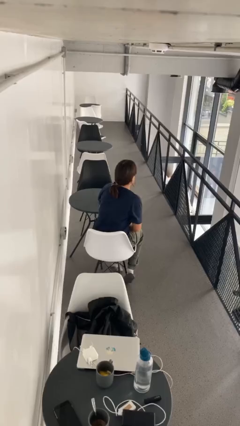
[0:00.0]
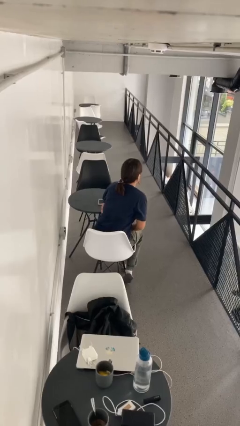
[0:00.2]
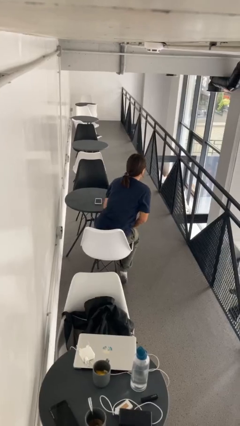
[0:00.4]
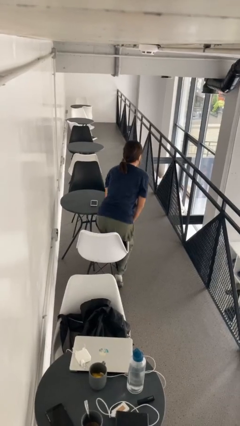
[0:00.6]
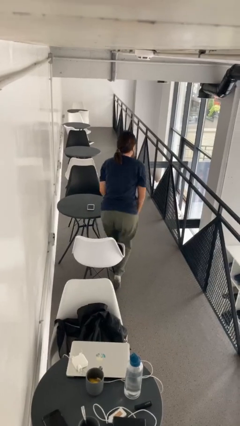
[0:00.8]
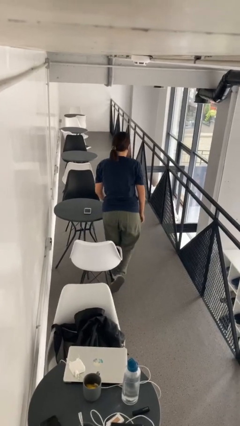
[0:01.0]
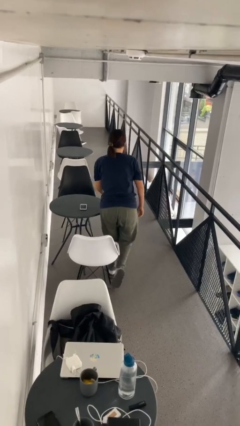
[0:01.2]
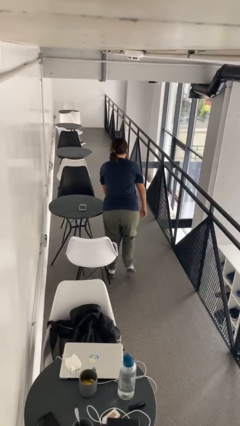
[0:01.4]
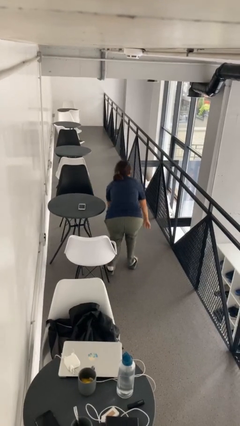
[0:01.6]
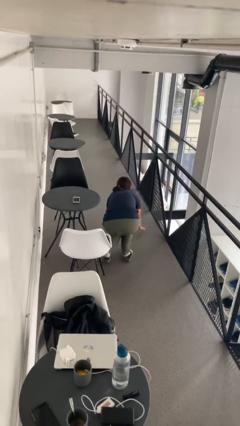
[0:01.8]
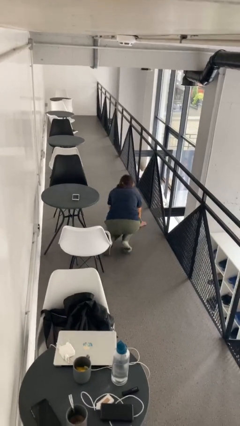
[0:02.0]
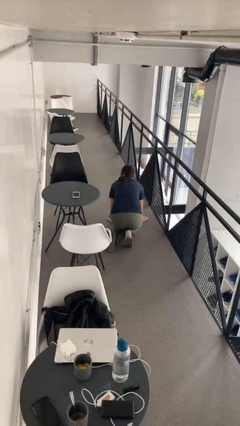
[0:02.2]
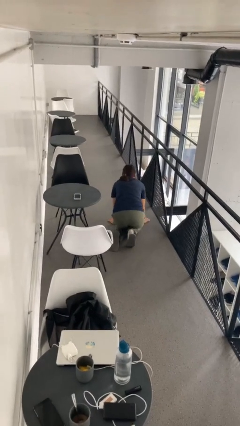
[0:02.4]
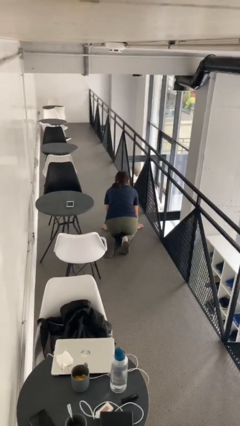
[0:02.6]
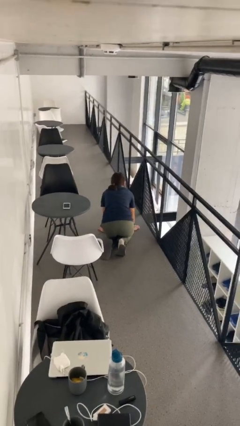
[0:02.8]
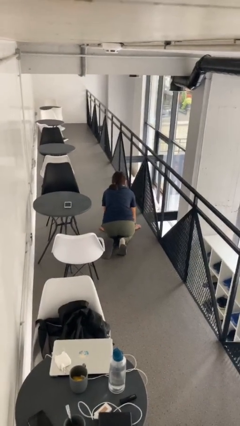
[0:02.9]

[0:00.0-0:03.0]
person falls from chair

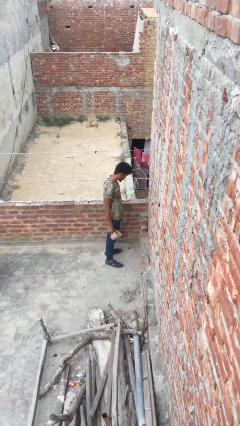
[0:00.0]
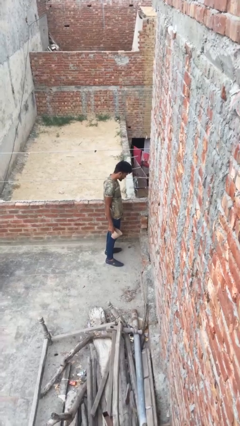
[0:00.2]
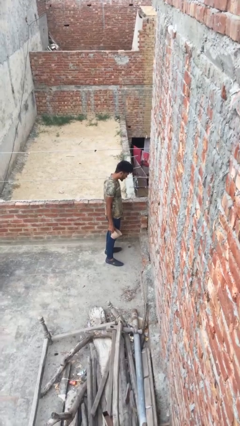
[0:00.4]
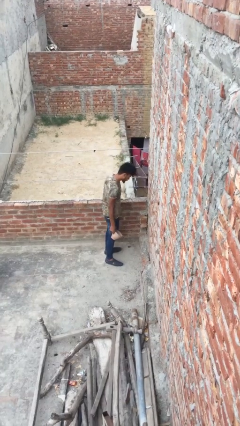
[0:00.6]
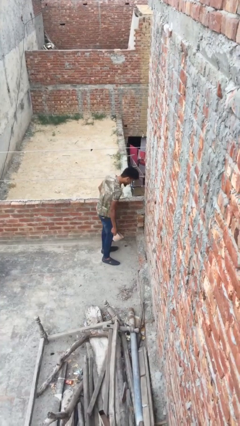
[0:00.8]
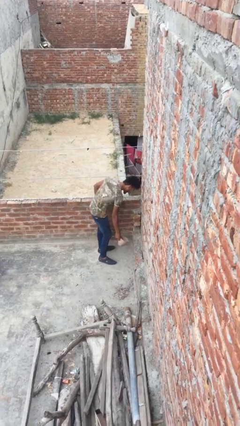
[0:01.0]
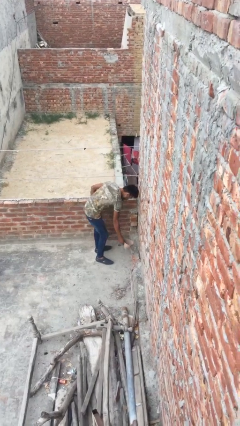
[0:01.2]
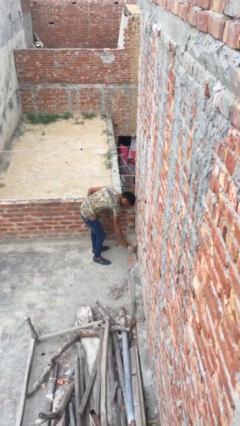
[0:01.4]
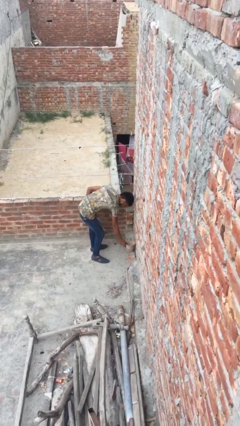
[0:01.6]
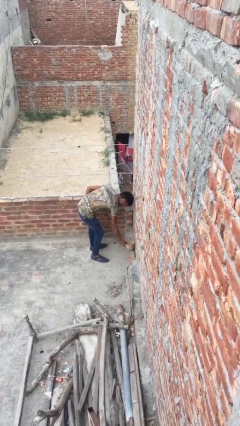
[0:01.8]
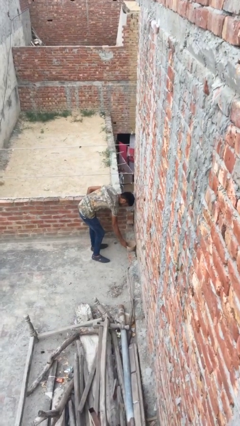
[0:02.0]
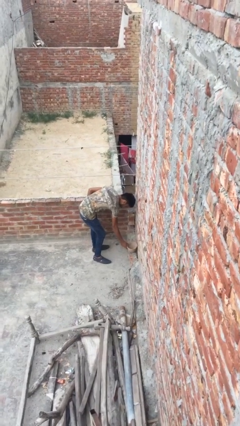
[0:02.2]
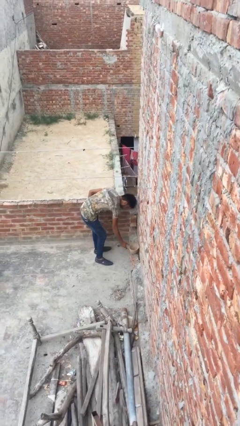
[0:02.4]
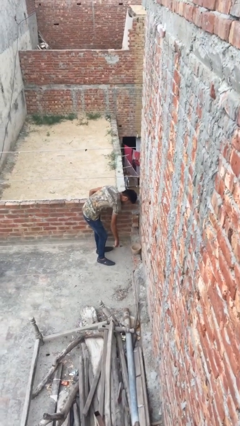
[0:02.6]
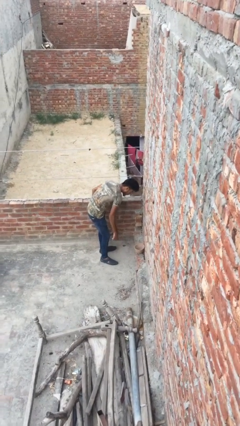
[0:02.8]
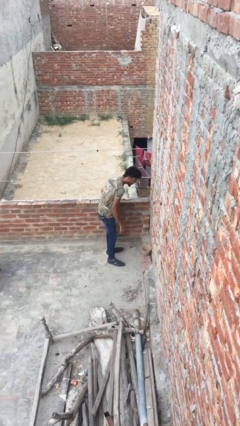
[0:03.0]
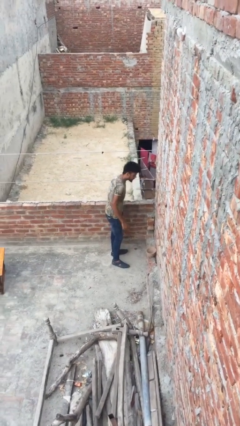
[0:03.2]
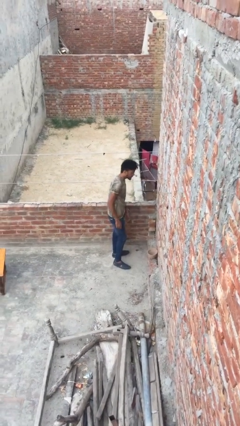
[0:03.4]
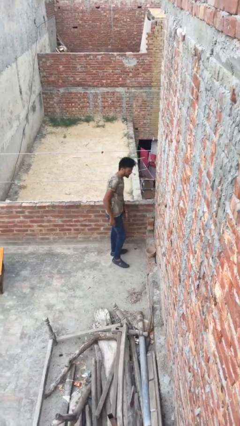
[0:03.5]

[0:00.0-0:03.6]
person puts down object on floor

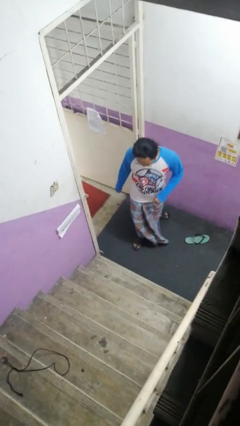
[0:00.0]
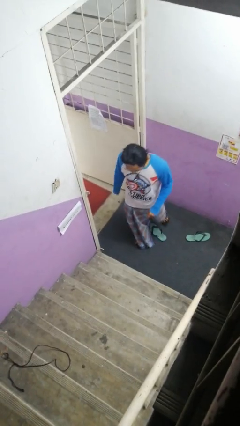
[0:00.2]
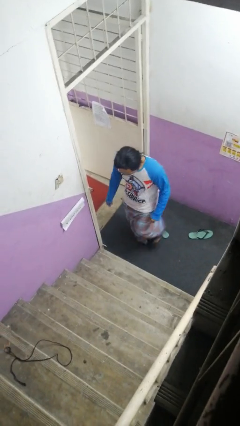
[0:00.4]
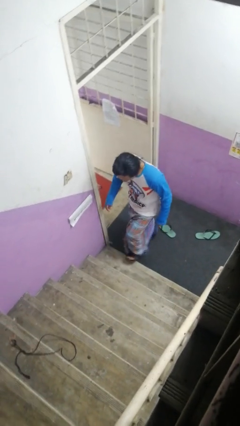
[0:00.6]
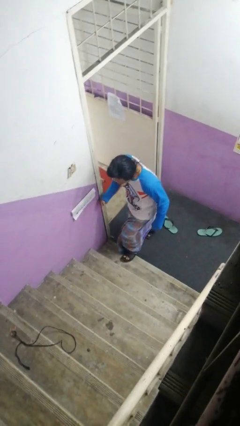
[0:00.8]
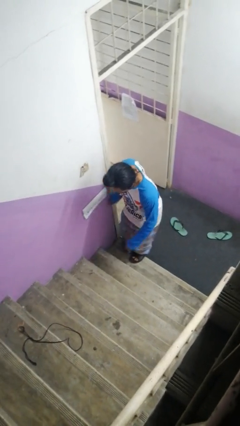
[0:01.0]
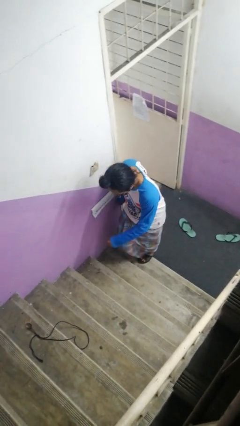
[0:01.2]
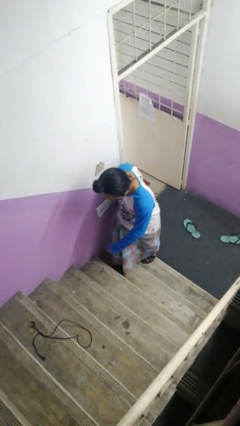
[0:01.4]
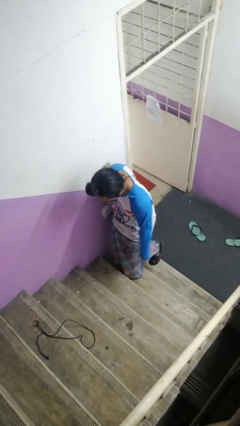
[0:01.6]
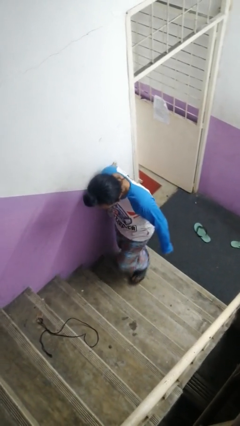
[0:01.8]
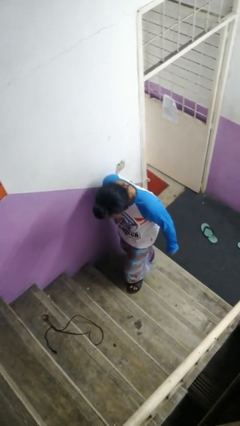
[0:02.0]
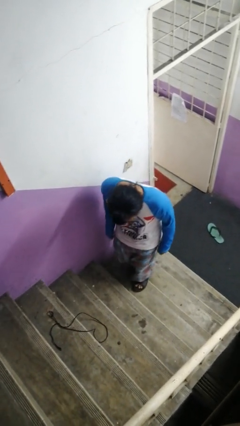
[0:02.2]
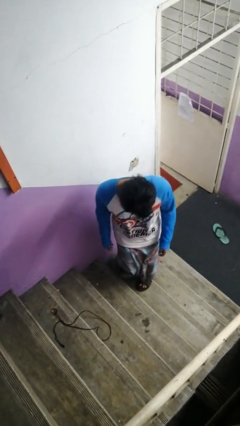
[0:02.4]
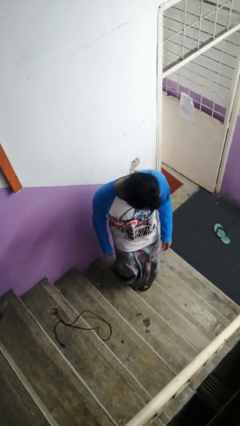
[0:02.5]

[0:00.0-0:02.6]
person climbs up stairs

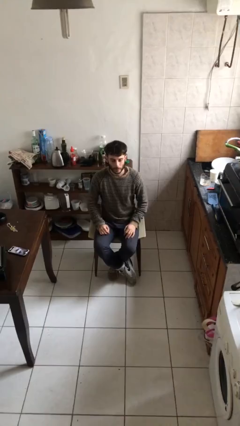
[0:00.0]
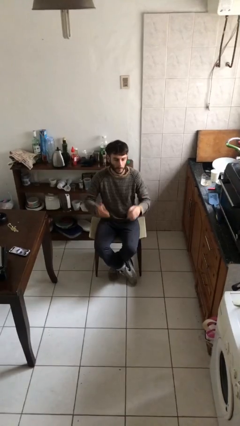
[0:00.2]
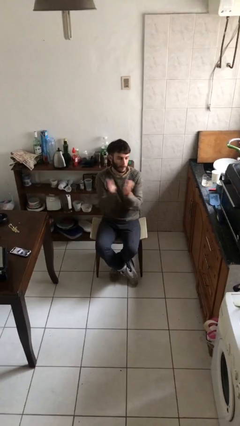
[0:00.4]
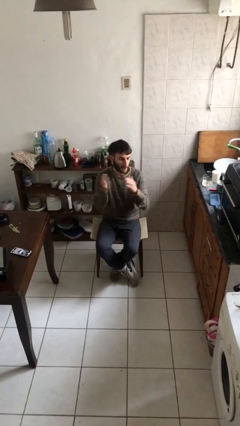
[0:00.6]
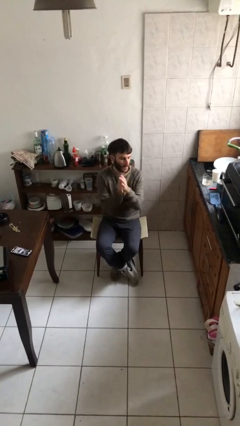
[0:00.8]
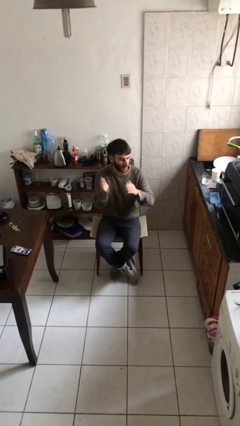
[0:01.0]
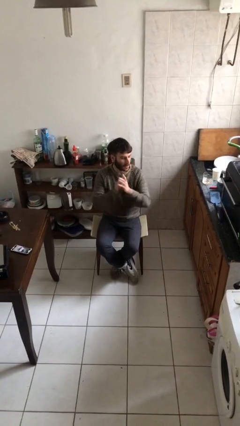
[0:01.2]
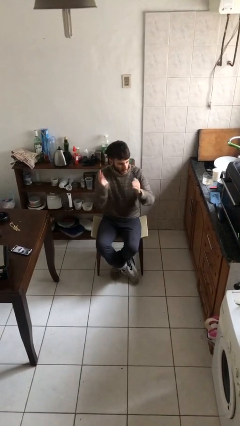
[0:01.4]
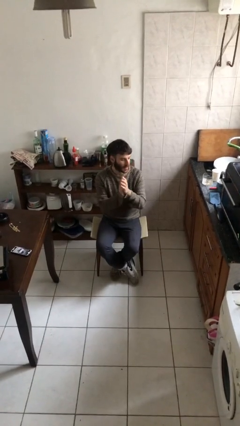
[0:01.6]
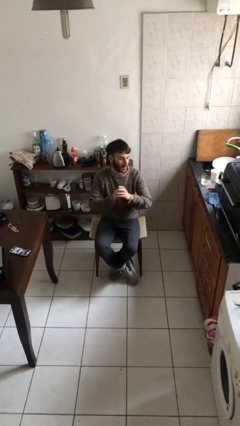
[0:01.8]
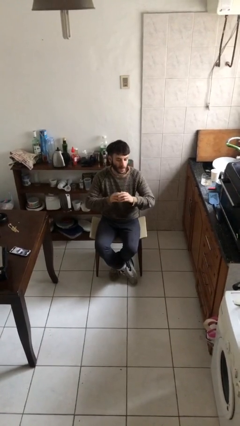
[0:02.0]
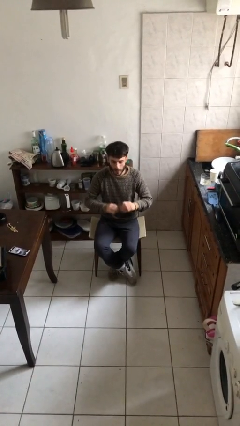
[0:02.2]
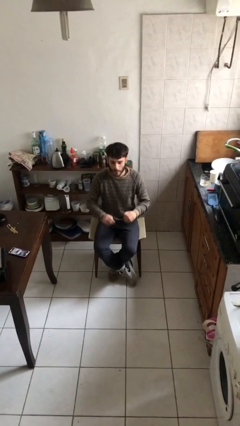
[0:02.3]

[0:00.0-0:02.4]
person claps hands

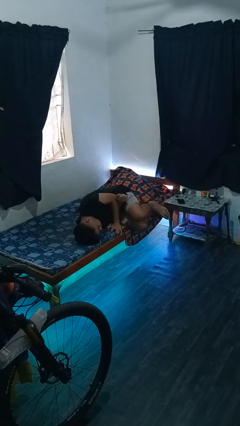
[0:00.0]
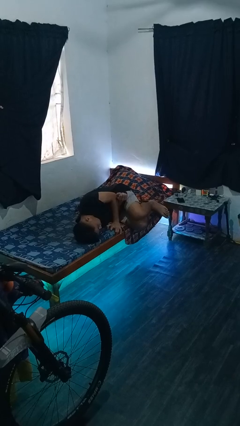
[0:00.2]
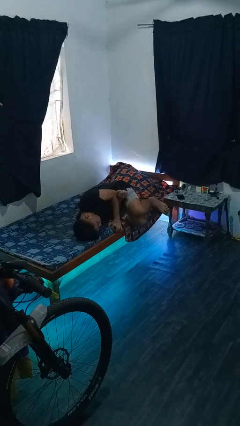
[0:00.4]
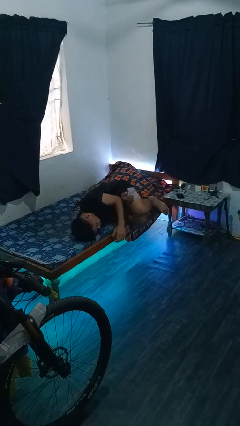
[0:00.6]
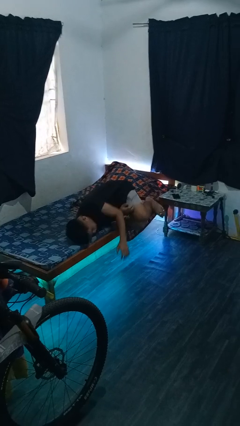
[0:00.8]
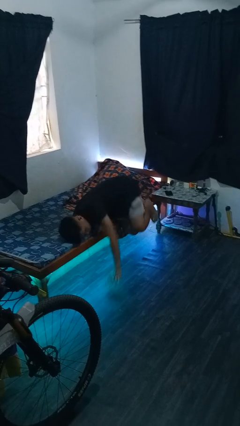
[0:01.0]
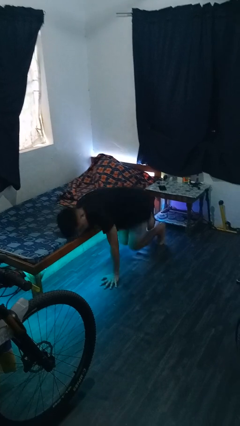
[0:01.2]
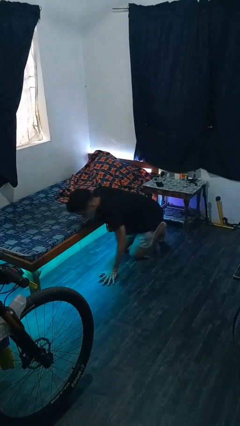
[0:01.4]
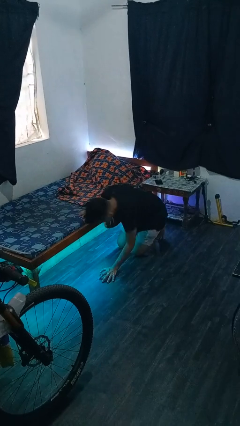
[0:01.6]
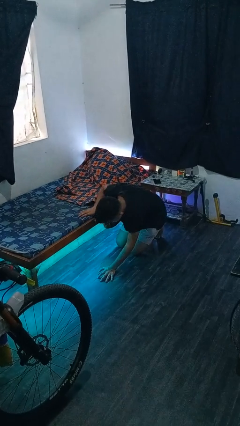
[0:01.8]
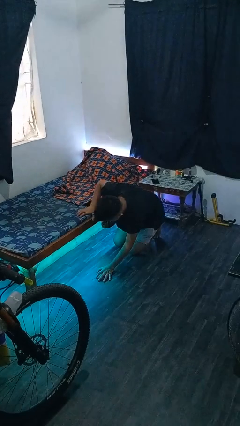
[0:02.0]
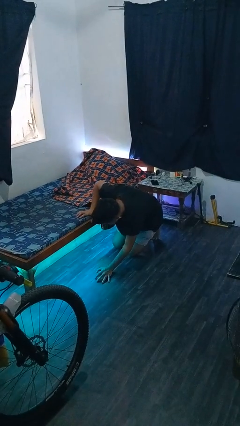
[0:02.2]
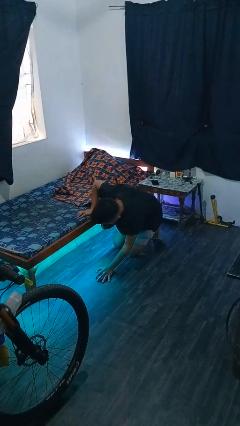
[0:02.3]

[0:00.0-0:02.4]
person falls from bed

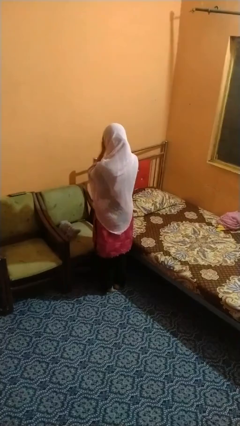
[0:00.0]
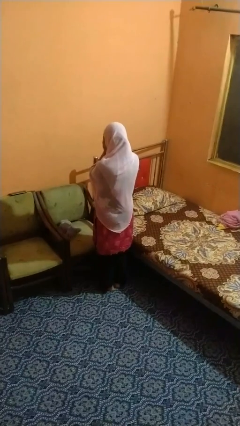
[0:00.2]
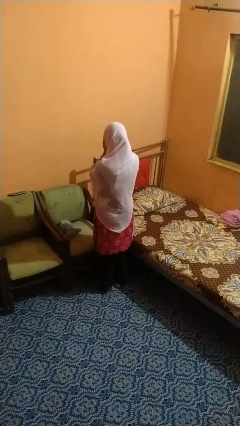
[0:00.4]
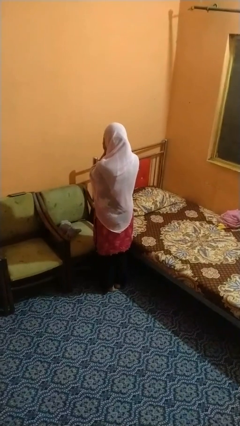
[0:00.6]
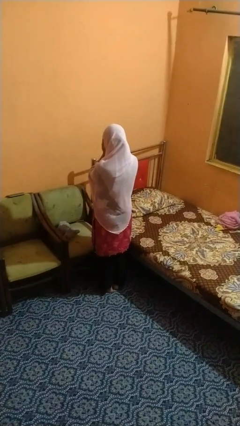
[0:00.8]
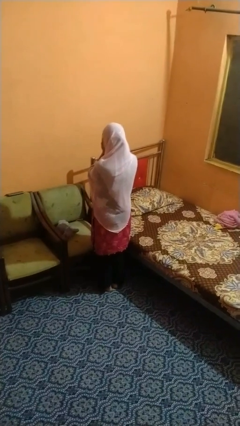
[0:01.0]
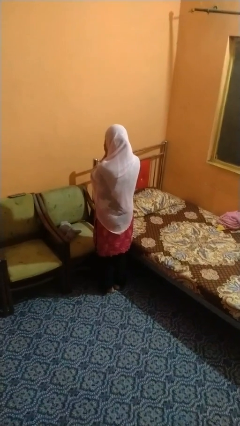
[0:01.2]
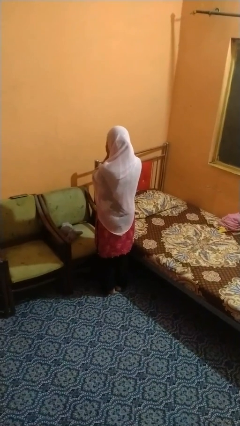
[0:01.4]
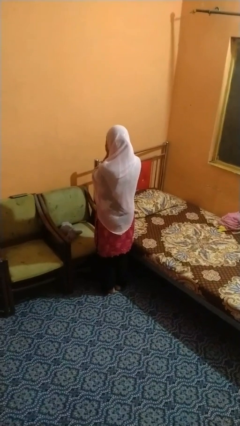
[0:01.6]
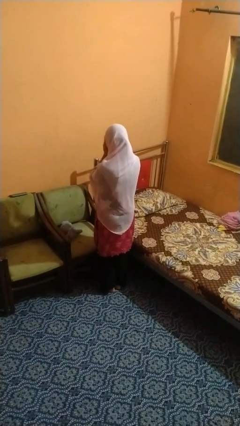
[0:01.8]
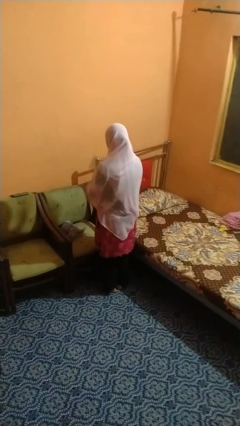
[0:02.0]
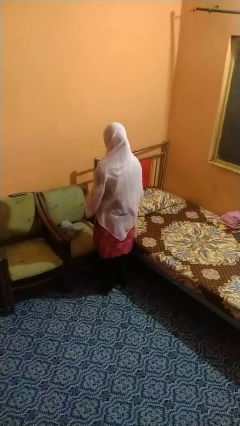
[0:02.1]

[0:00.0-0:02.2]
person covers face with hands

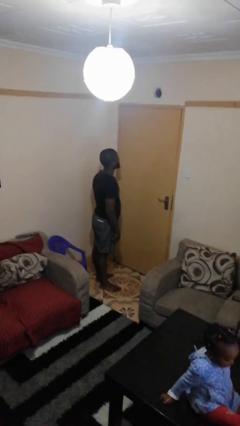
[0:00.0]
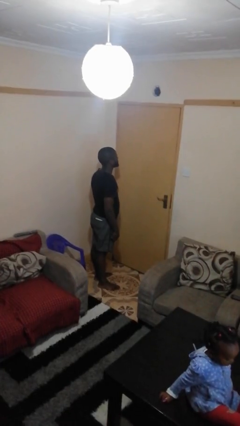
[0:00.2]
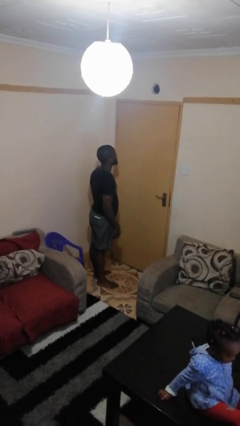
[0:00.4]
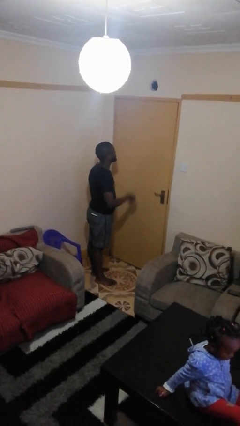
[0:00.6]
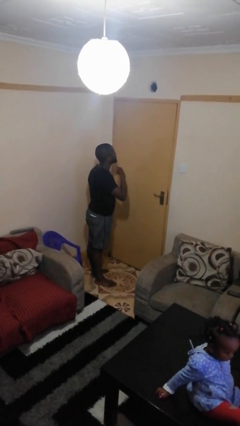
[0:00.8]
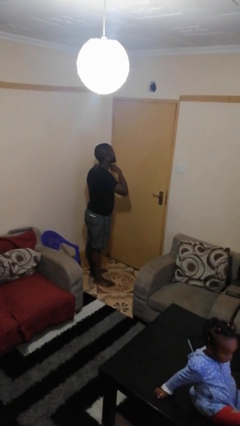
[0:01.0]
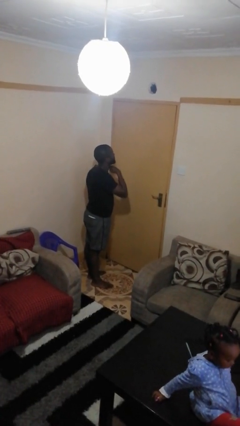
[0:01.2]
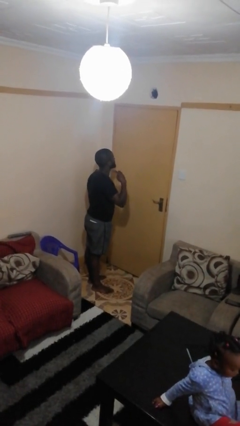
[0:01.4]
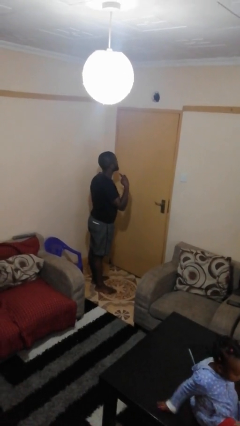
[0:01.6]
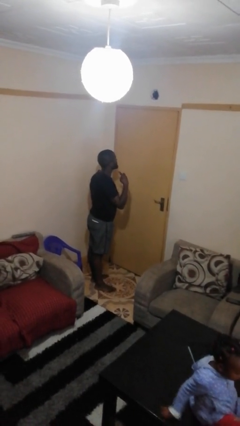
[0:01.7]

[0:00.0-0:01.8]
person gestures cut
